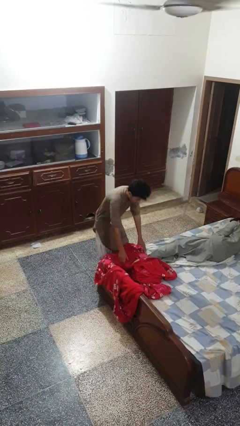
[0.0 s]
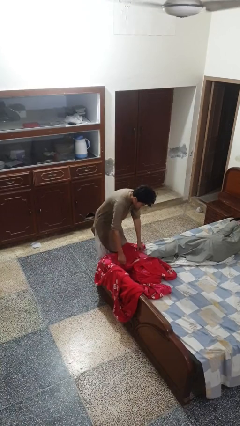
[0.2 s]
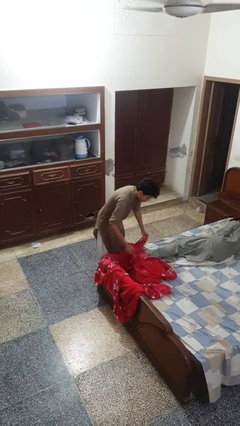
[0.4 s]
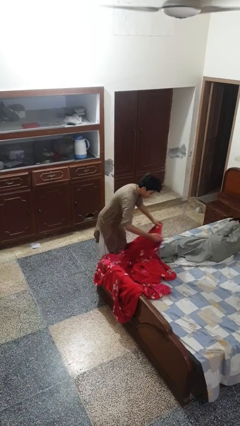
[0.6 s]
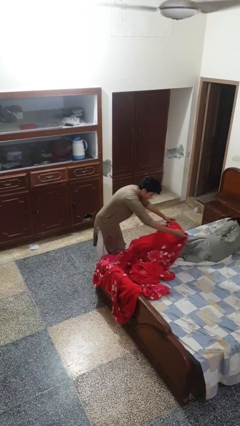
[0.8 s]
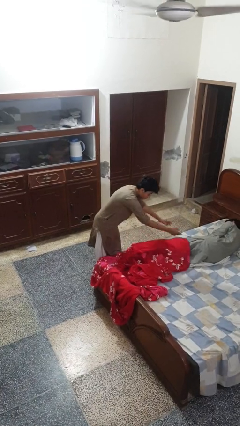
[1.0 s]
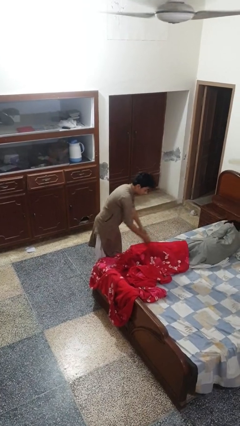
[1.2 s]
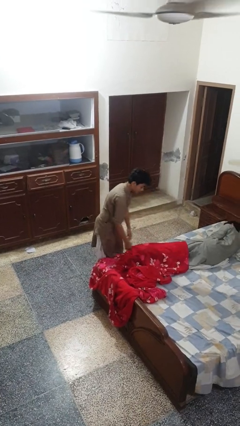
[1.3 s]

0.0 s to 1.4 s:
person covers friend with blanket

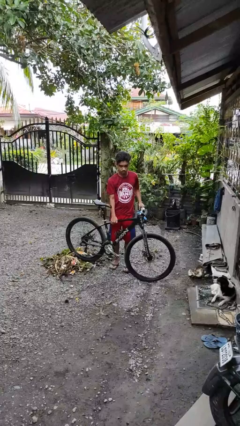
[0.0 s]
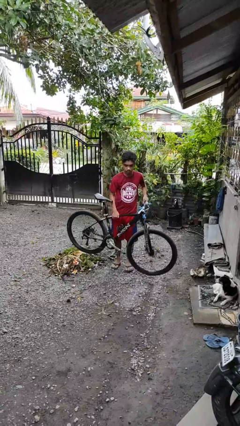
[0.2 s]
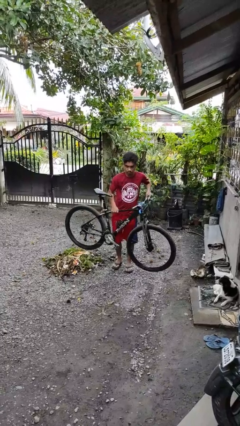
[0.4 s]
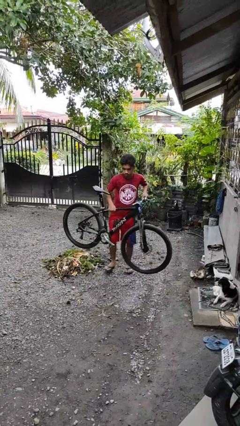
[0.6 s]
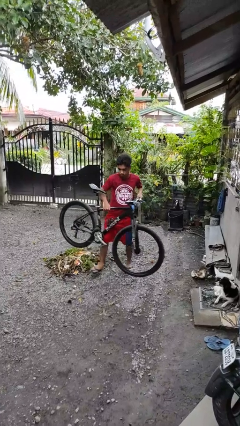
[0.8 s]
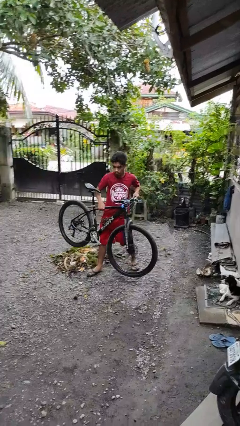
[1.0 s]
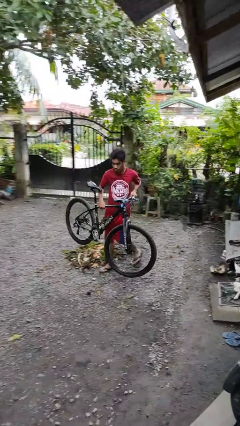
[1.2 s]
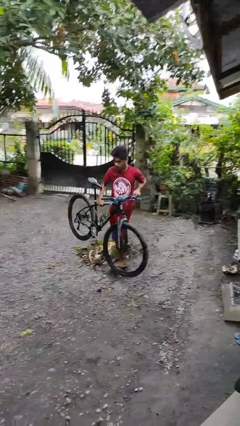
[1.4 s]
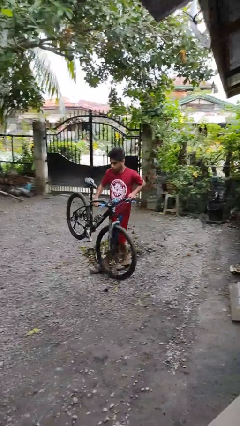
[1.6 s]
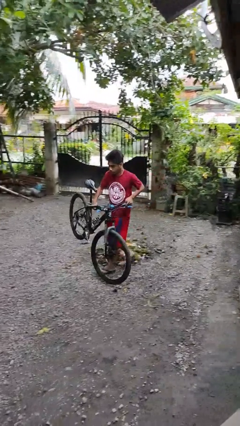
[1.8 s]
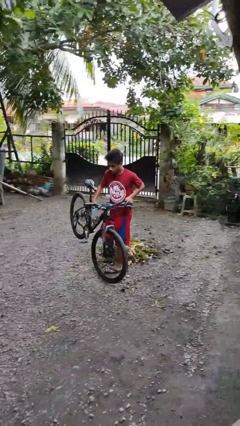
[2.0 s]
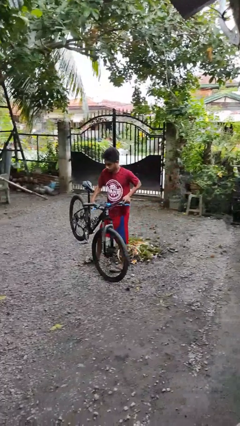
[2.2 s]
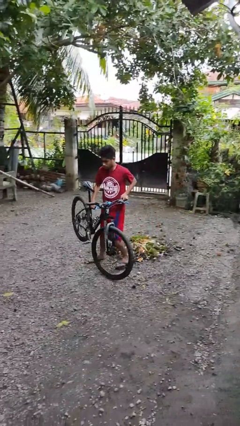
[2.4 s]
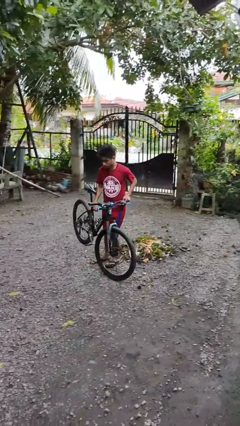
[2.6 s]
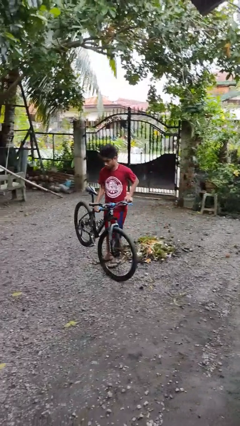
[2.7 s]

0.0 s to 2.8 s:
person carries bicycle

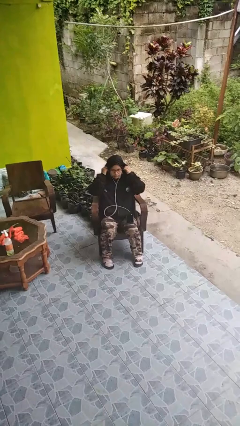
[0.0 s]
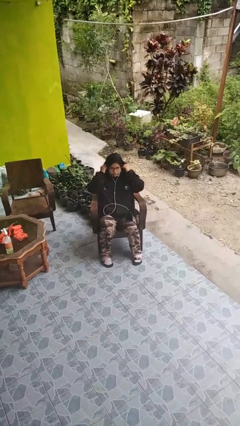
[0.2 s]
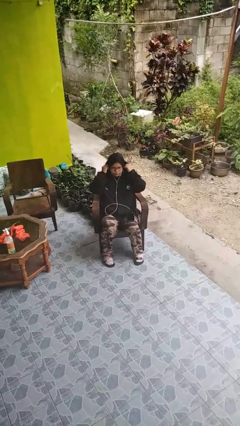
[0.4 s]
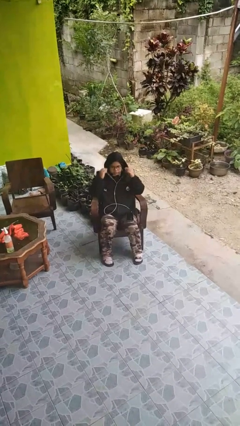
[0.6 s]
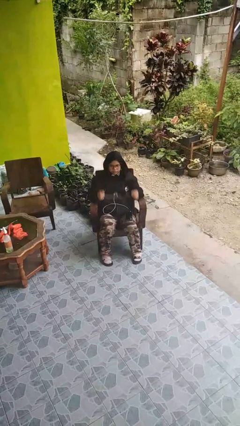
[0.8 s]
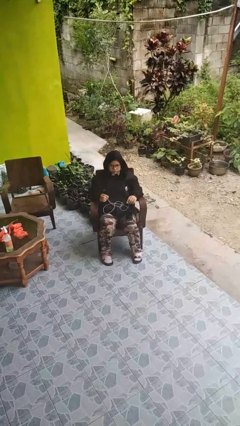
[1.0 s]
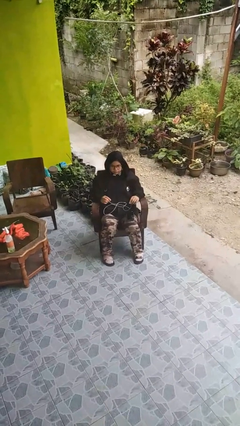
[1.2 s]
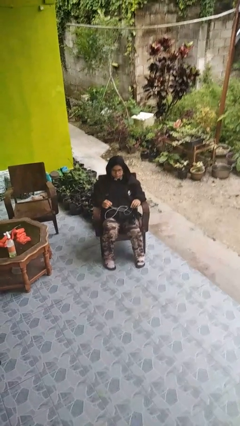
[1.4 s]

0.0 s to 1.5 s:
person takes off headphones

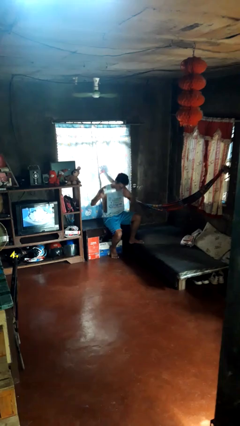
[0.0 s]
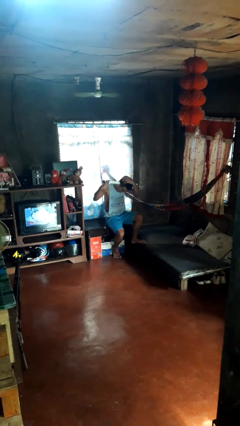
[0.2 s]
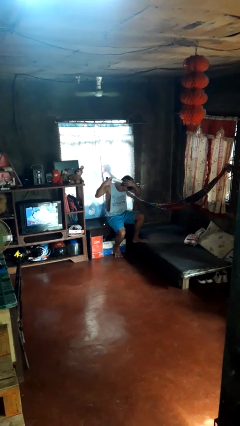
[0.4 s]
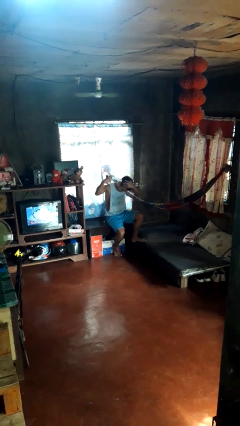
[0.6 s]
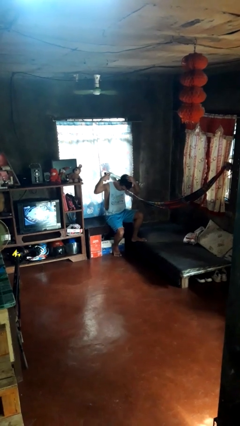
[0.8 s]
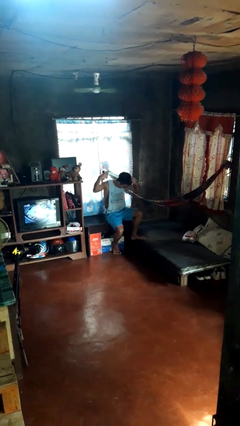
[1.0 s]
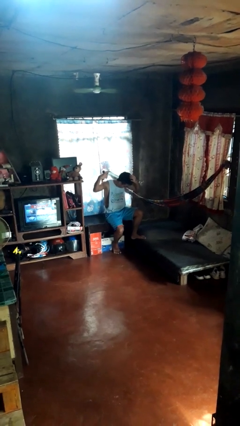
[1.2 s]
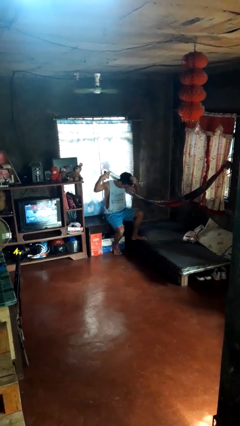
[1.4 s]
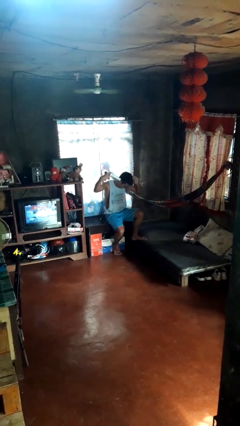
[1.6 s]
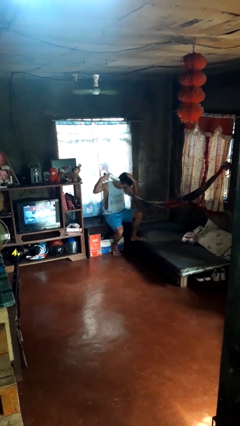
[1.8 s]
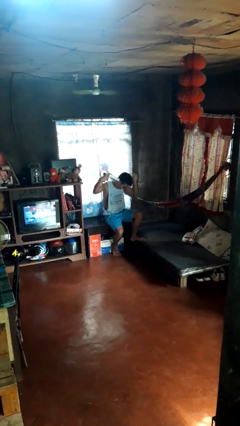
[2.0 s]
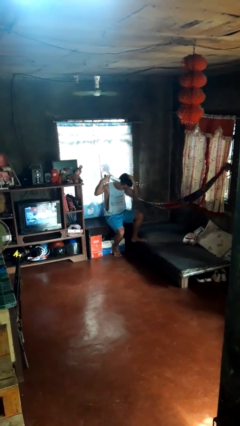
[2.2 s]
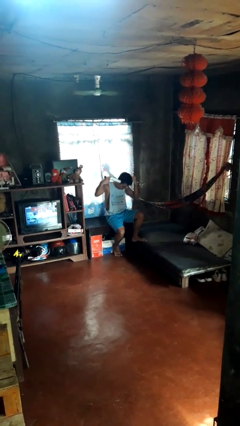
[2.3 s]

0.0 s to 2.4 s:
person dries hair with hairdryer

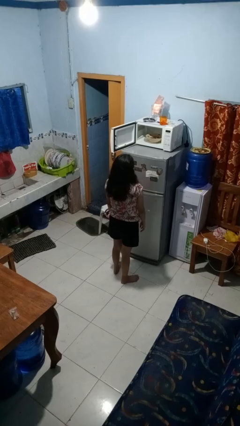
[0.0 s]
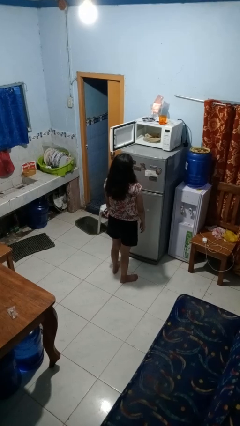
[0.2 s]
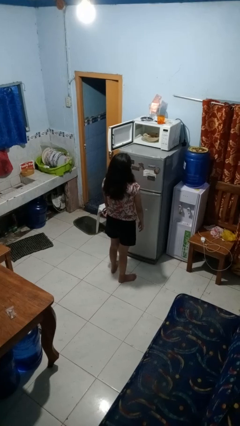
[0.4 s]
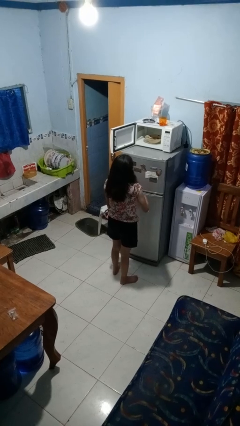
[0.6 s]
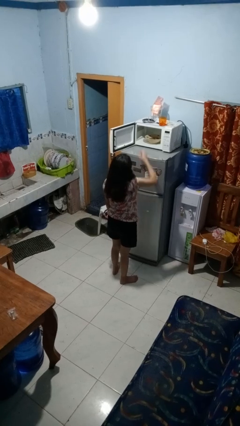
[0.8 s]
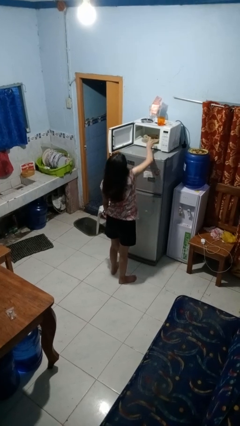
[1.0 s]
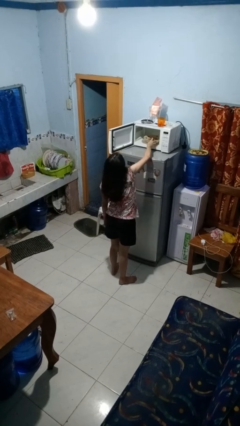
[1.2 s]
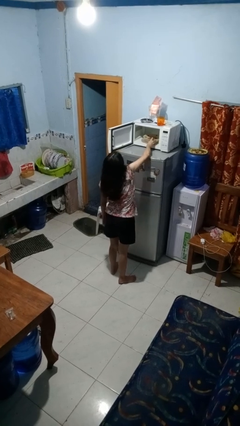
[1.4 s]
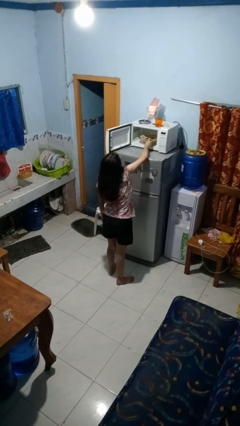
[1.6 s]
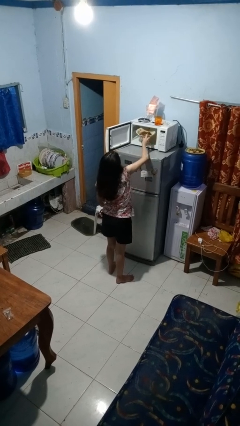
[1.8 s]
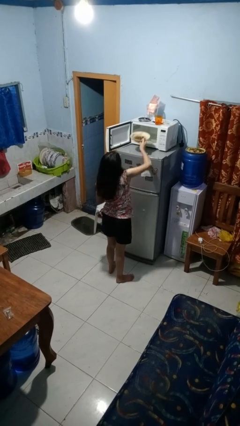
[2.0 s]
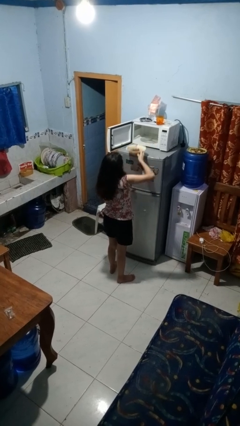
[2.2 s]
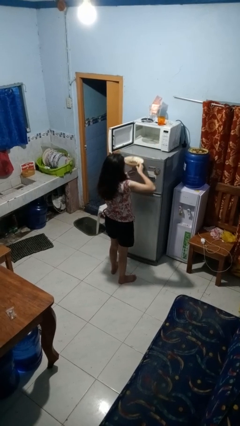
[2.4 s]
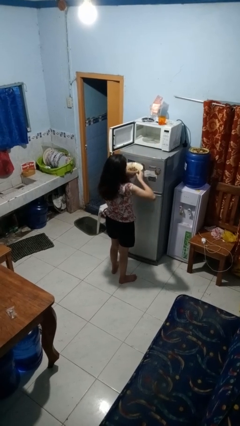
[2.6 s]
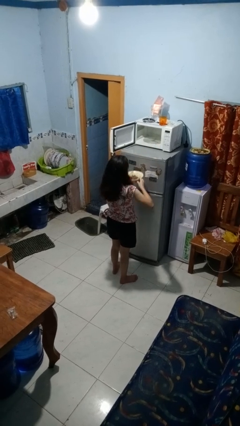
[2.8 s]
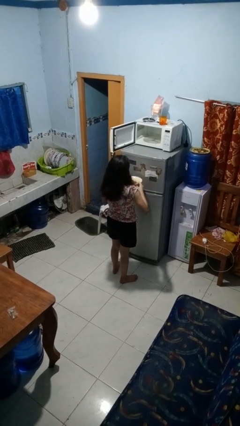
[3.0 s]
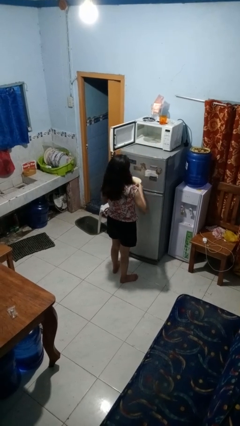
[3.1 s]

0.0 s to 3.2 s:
person takes object from microwave

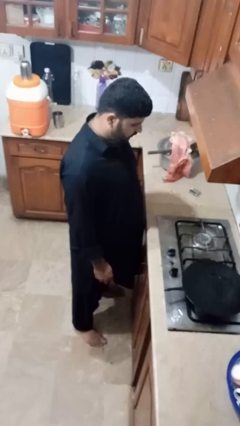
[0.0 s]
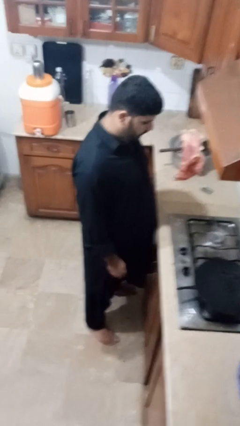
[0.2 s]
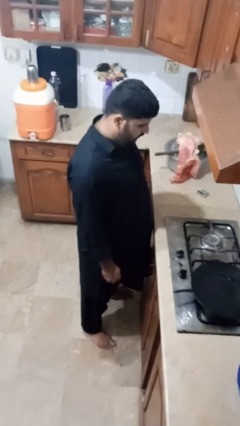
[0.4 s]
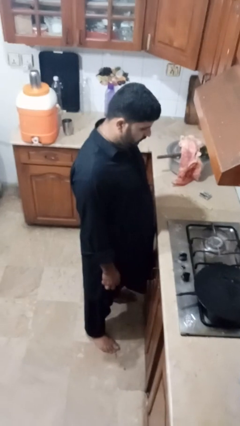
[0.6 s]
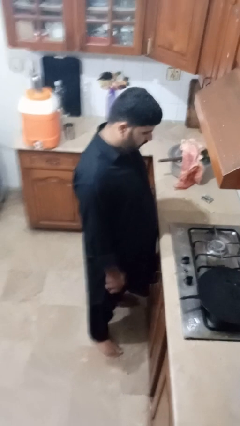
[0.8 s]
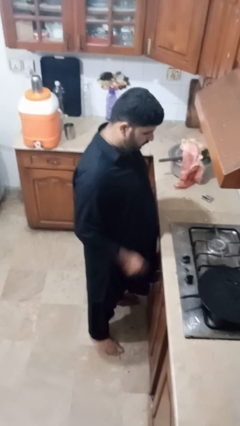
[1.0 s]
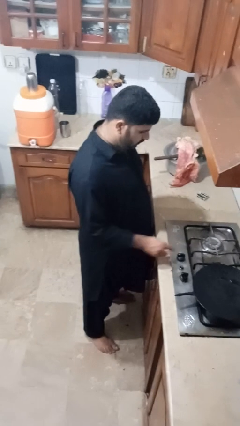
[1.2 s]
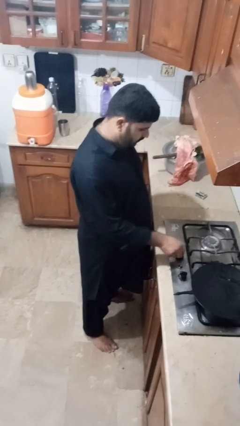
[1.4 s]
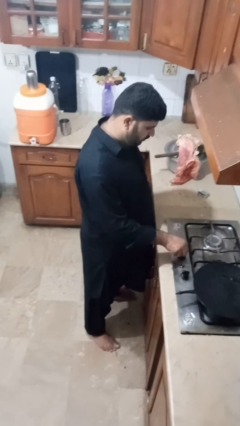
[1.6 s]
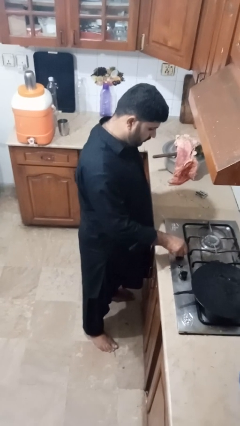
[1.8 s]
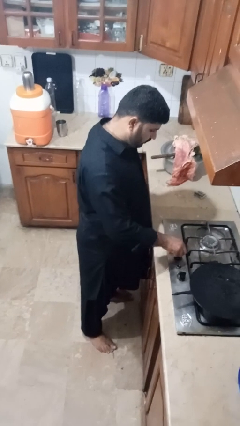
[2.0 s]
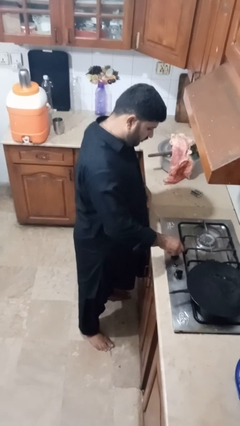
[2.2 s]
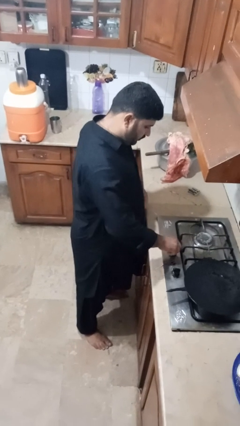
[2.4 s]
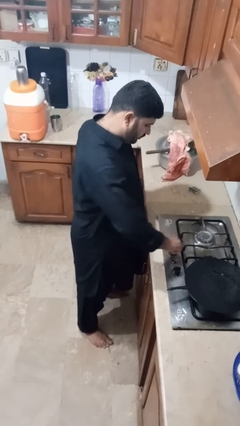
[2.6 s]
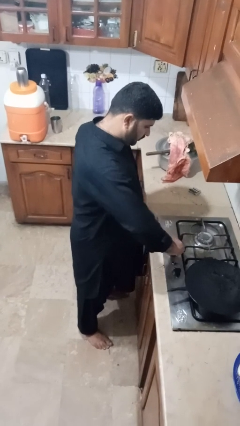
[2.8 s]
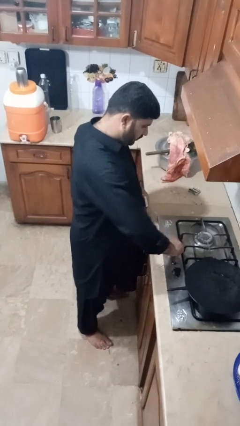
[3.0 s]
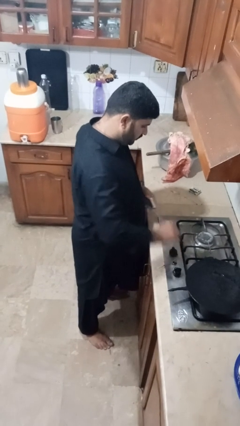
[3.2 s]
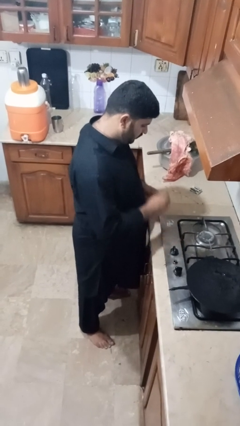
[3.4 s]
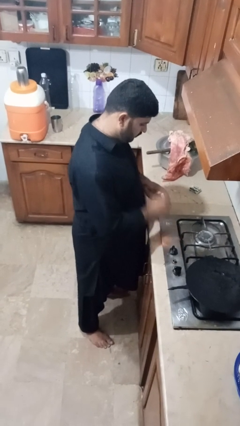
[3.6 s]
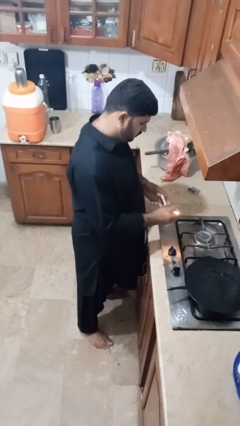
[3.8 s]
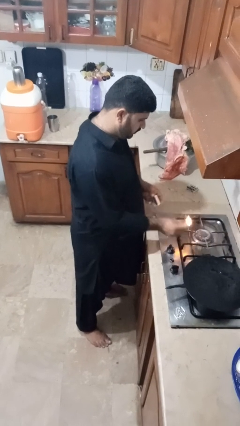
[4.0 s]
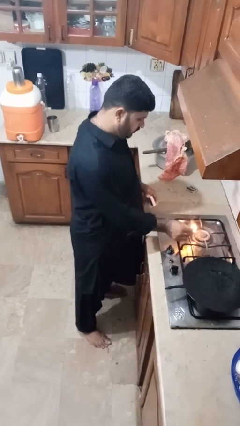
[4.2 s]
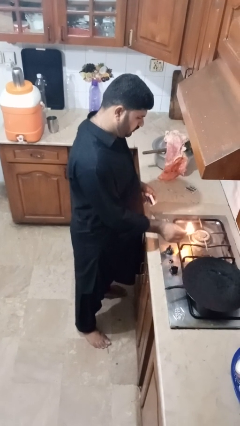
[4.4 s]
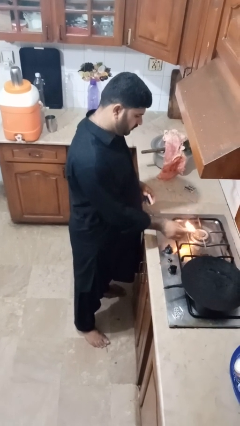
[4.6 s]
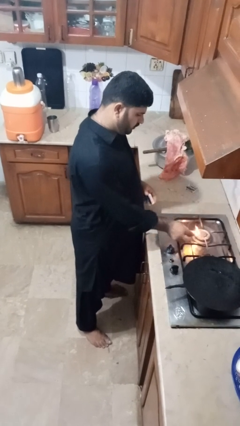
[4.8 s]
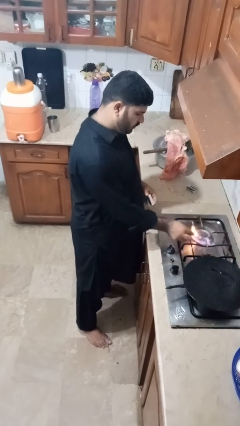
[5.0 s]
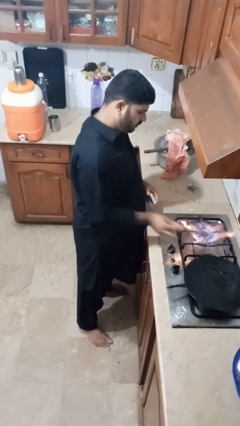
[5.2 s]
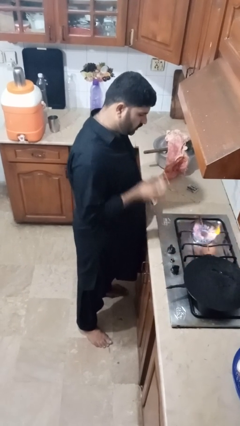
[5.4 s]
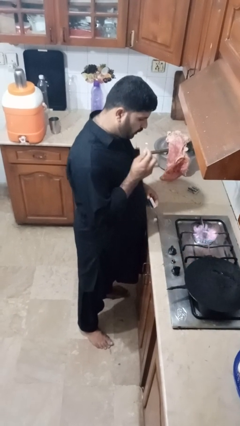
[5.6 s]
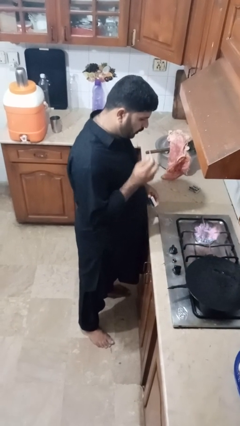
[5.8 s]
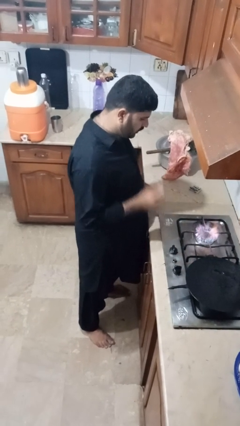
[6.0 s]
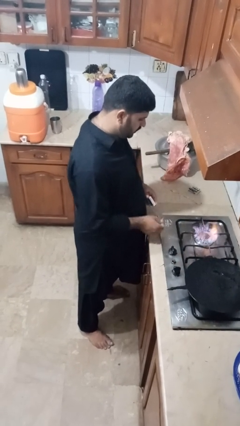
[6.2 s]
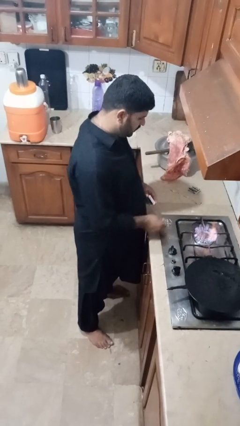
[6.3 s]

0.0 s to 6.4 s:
person turns on stovetop
